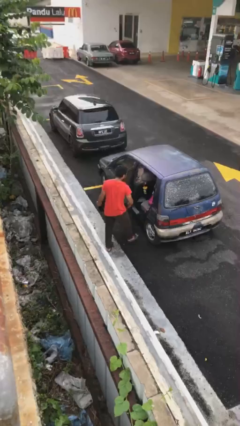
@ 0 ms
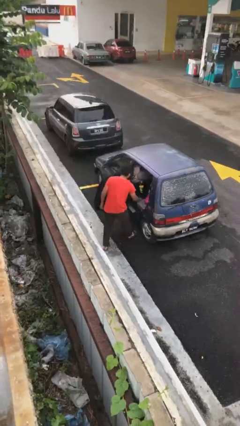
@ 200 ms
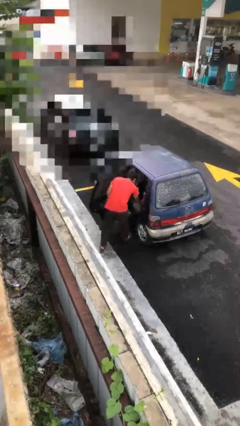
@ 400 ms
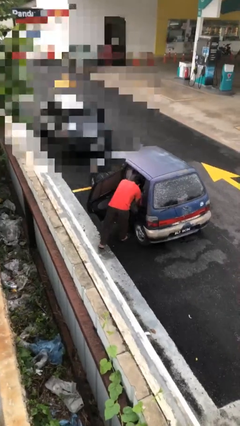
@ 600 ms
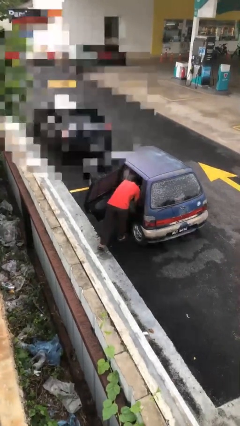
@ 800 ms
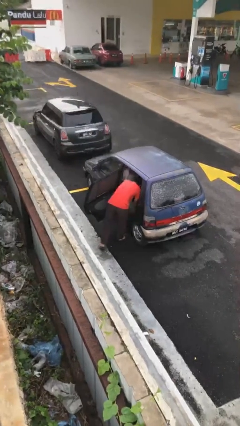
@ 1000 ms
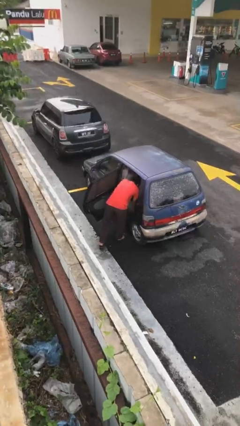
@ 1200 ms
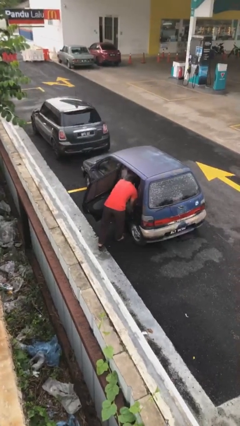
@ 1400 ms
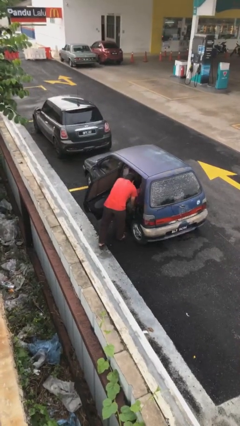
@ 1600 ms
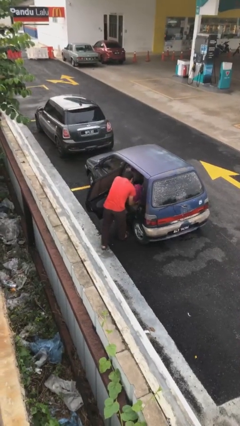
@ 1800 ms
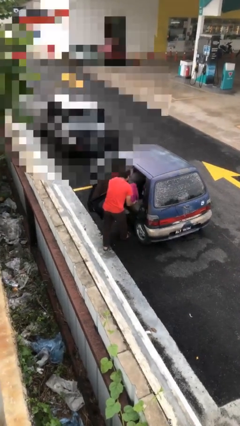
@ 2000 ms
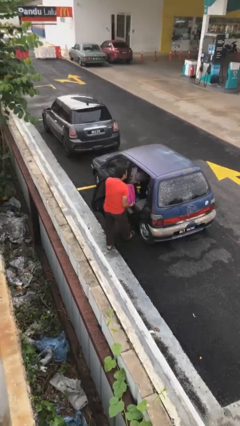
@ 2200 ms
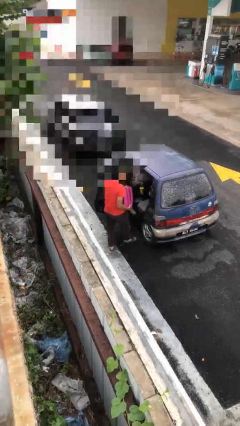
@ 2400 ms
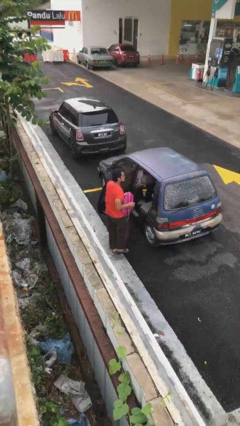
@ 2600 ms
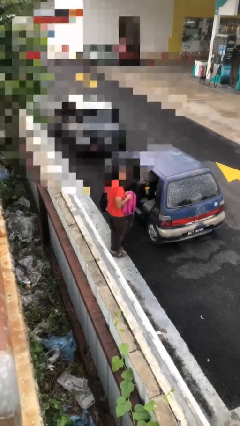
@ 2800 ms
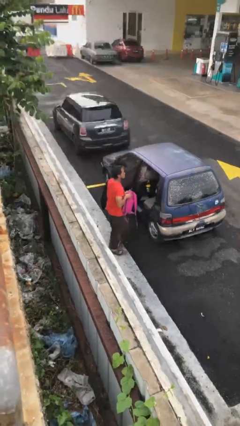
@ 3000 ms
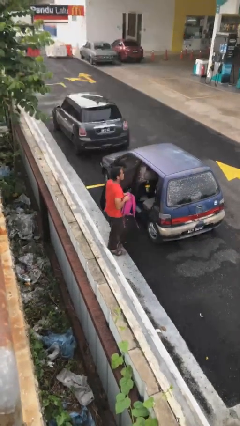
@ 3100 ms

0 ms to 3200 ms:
person unloads car

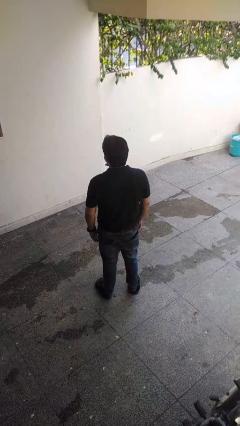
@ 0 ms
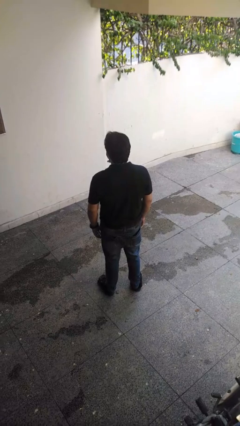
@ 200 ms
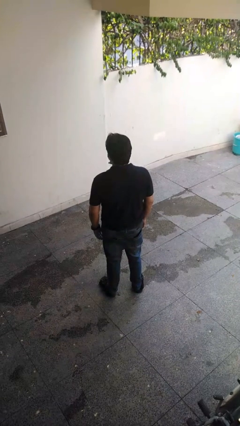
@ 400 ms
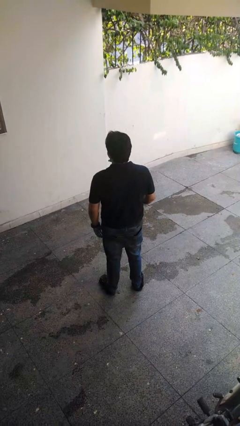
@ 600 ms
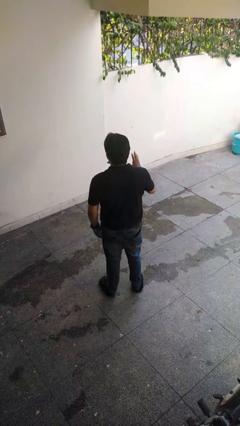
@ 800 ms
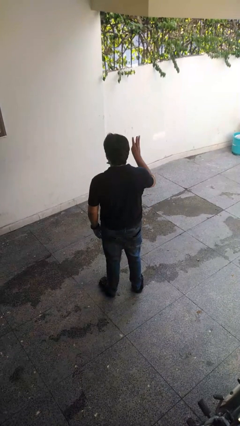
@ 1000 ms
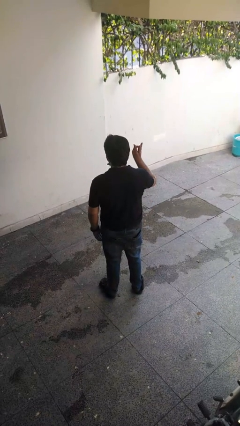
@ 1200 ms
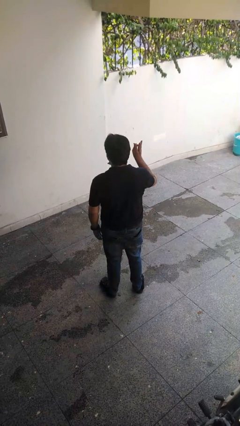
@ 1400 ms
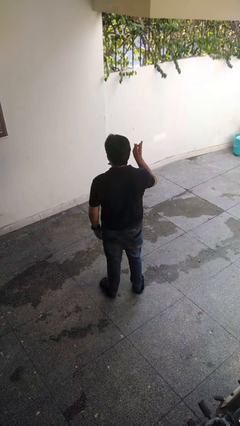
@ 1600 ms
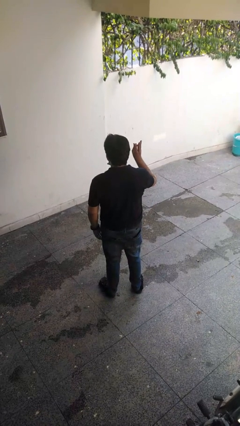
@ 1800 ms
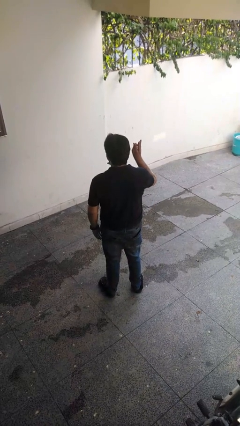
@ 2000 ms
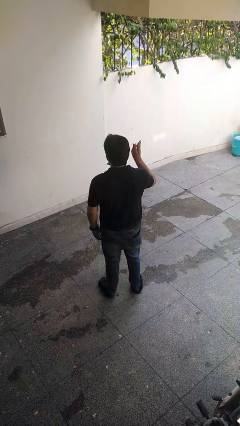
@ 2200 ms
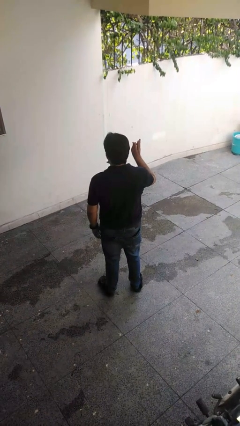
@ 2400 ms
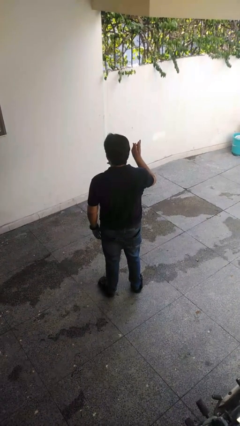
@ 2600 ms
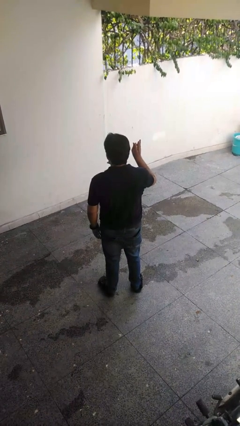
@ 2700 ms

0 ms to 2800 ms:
person gestures number three

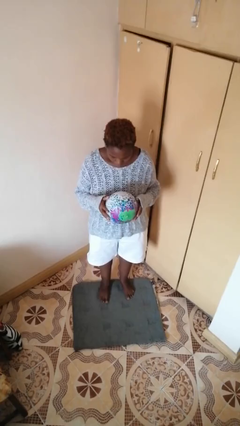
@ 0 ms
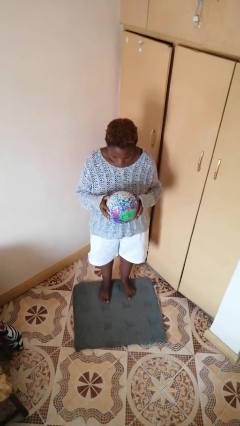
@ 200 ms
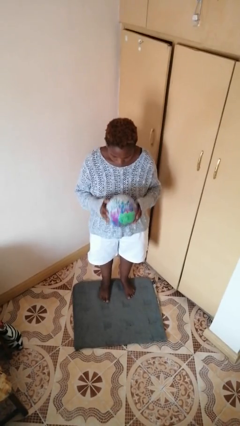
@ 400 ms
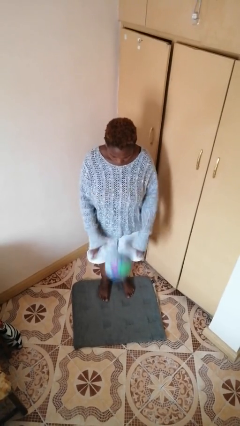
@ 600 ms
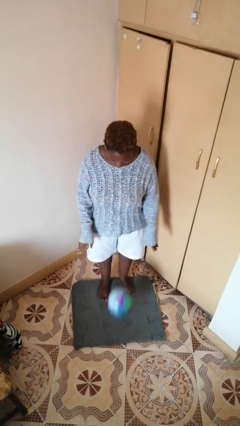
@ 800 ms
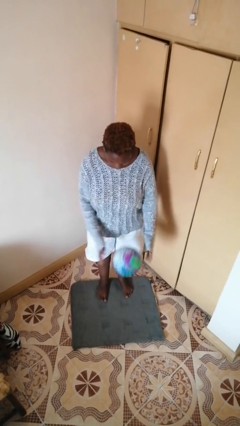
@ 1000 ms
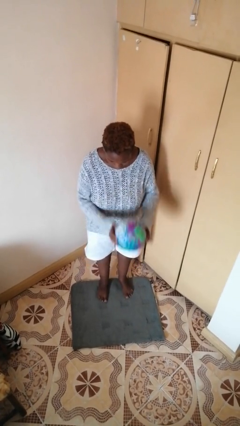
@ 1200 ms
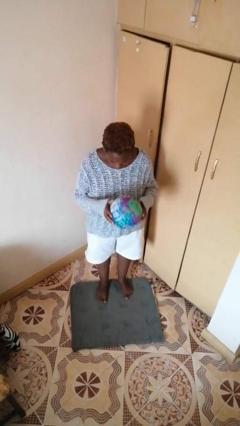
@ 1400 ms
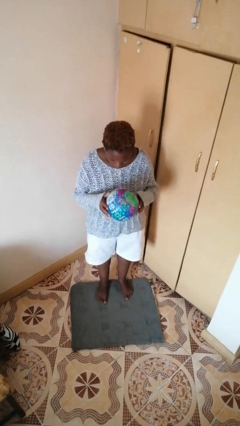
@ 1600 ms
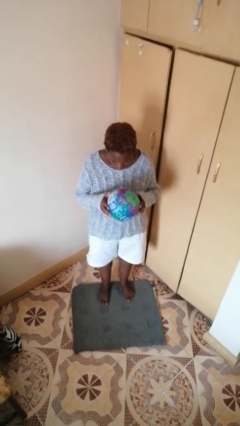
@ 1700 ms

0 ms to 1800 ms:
person bounces ball on floor

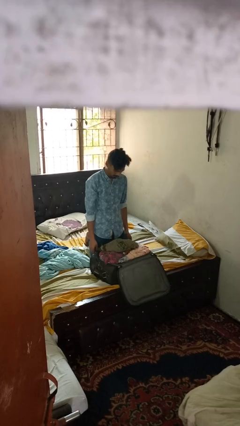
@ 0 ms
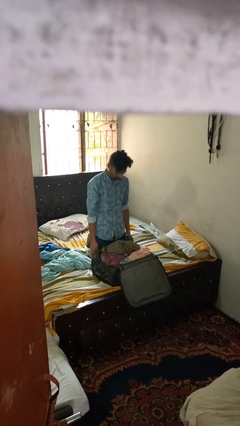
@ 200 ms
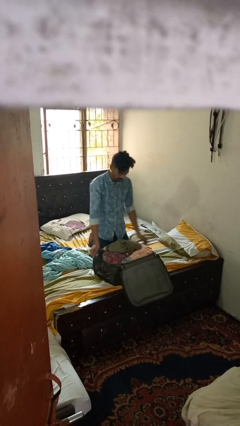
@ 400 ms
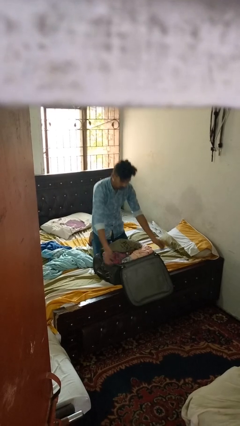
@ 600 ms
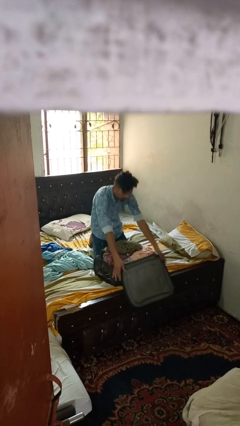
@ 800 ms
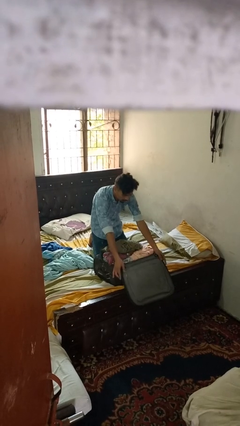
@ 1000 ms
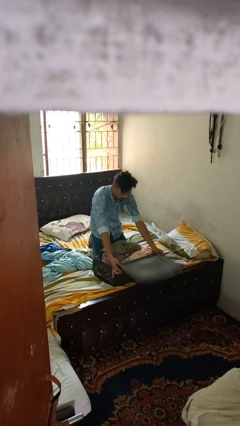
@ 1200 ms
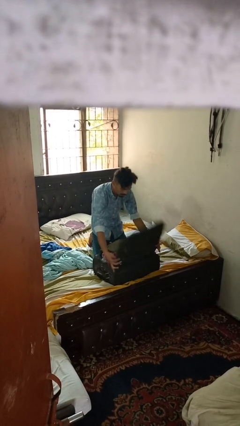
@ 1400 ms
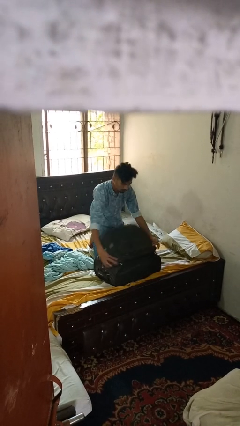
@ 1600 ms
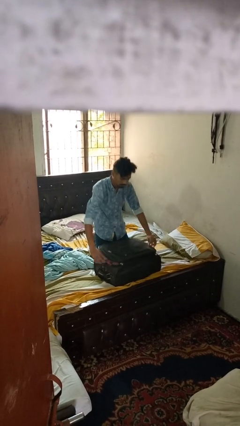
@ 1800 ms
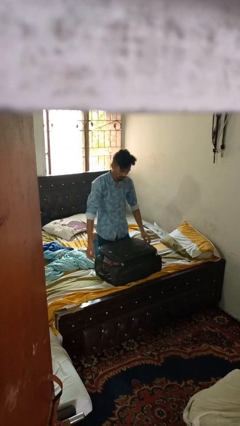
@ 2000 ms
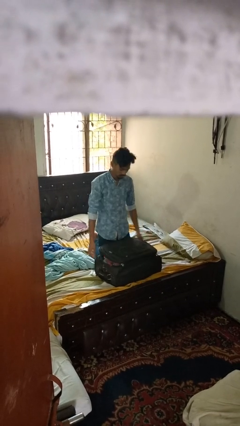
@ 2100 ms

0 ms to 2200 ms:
person closes suitcase

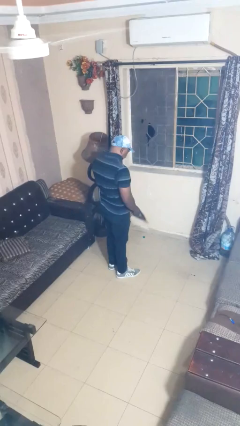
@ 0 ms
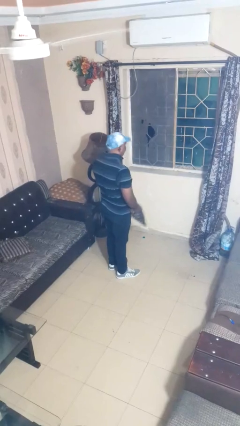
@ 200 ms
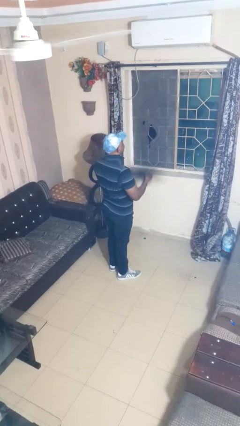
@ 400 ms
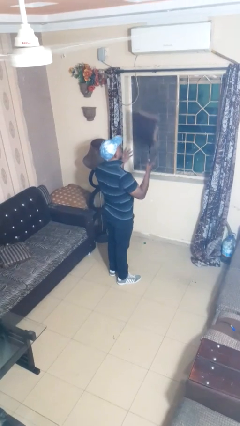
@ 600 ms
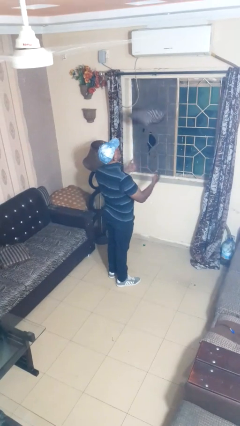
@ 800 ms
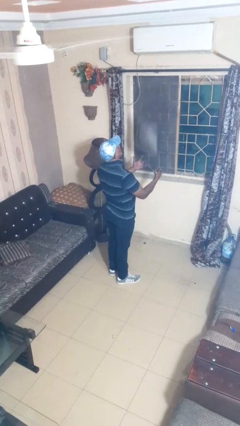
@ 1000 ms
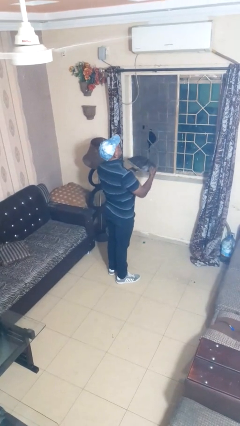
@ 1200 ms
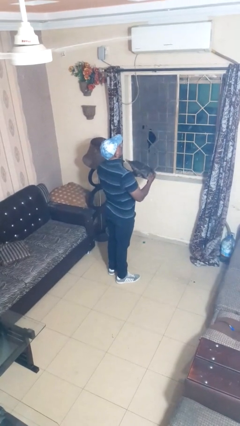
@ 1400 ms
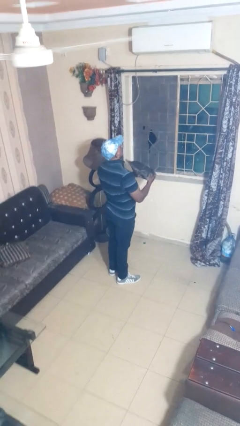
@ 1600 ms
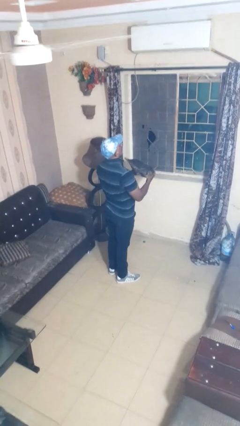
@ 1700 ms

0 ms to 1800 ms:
person drops object

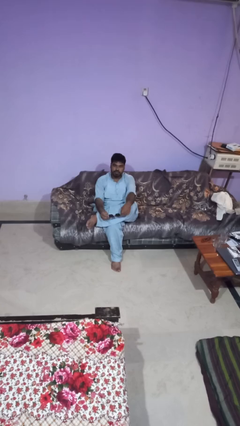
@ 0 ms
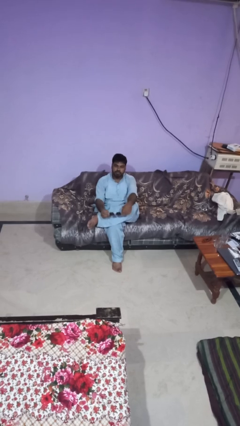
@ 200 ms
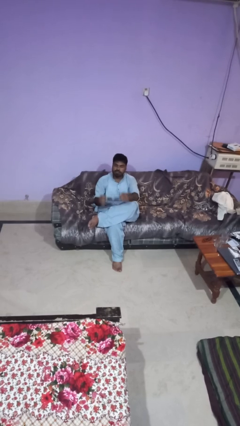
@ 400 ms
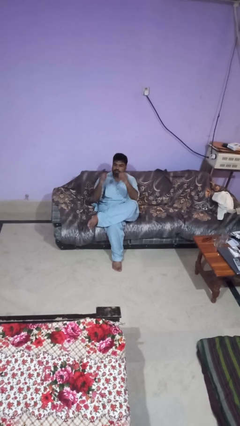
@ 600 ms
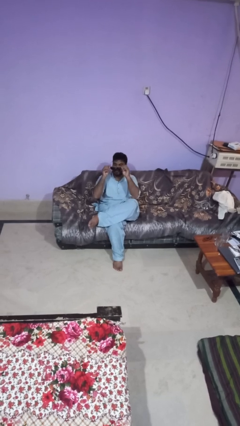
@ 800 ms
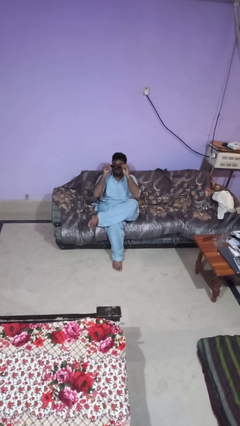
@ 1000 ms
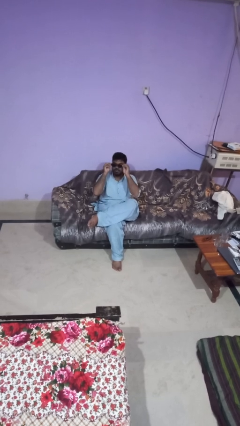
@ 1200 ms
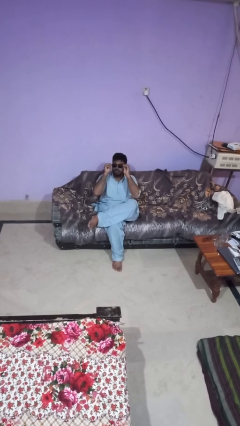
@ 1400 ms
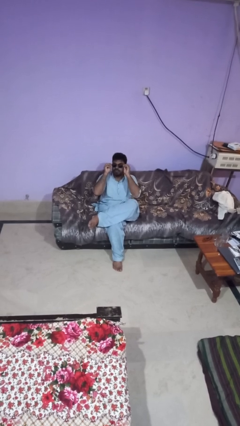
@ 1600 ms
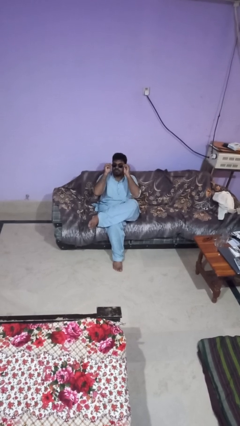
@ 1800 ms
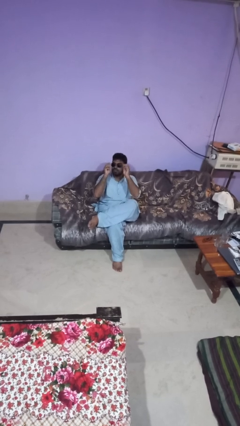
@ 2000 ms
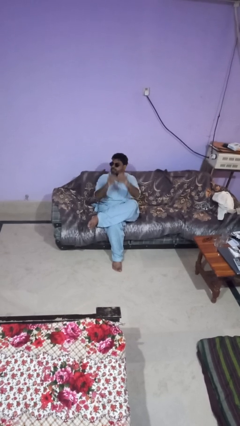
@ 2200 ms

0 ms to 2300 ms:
person puts on sunglasses

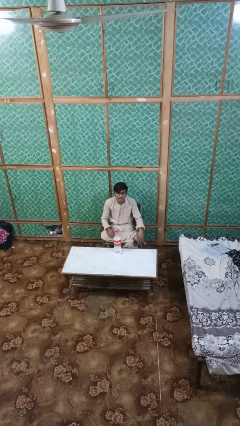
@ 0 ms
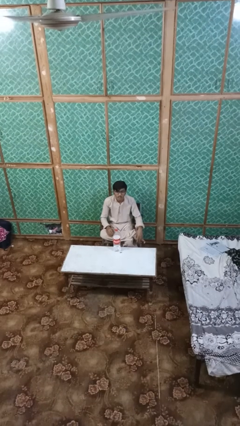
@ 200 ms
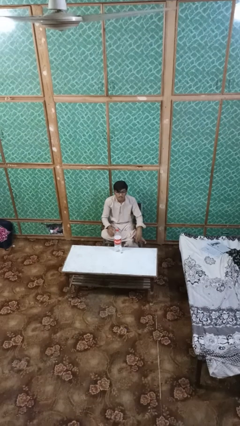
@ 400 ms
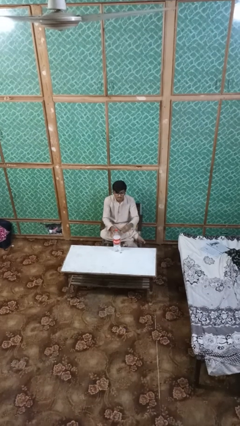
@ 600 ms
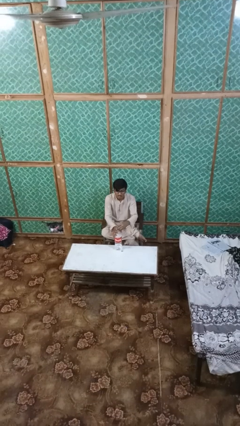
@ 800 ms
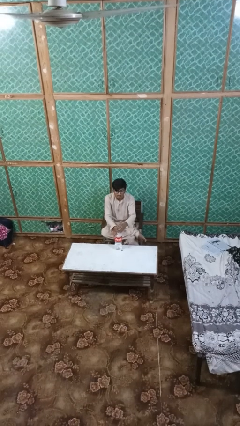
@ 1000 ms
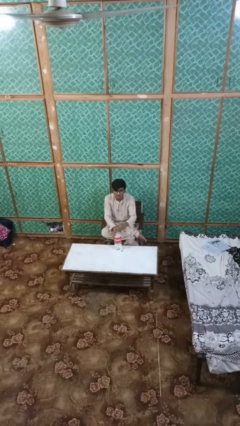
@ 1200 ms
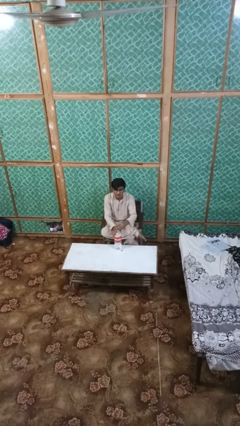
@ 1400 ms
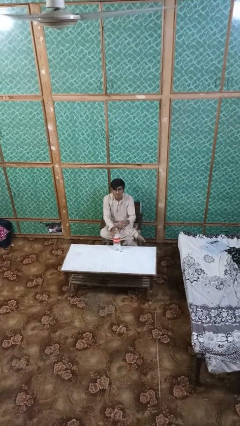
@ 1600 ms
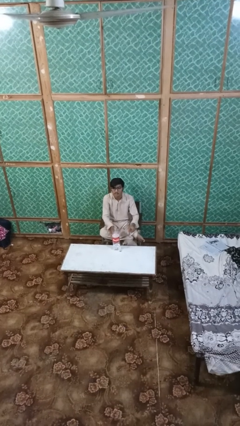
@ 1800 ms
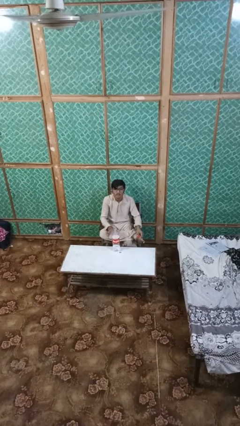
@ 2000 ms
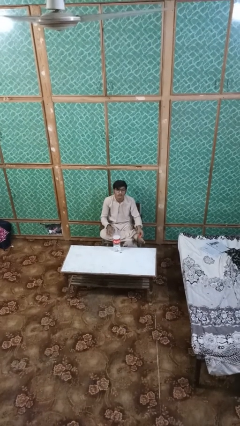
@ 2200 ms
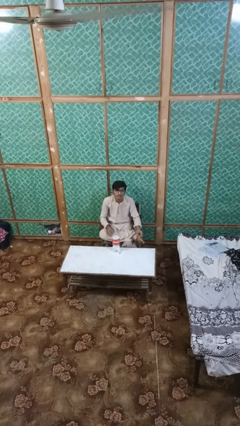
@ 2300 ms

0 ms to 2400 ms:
person unscrews lid from bottle

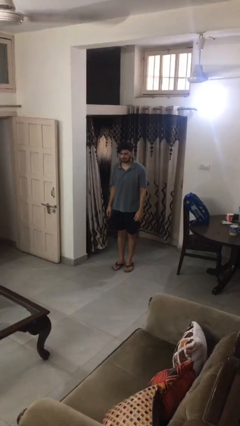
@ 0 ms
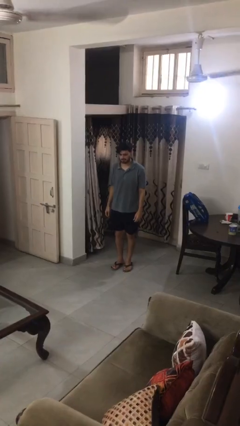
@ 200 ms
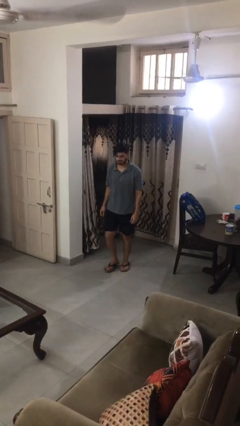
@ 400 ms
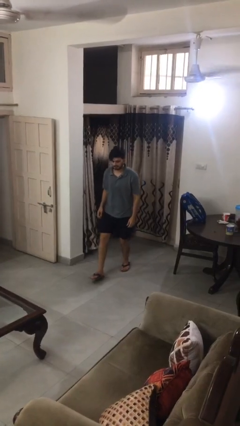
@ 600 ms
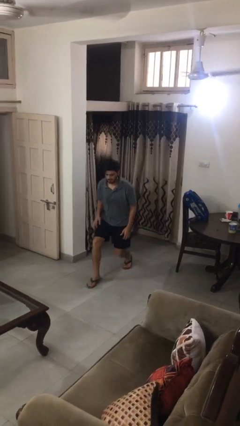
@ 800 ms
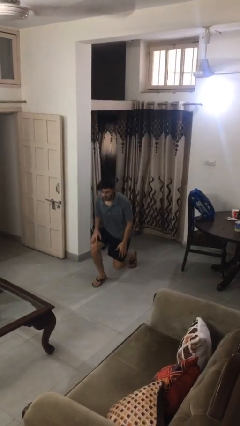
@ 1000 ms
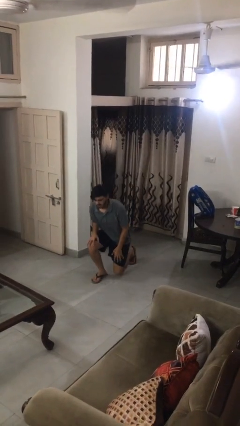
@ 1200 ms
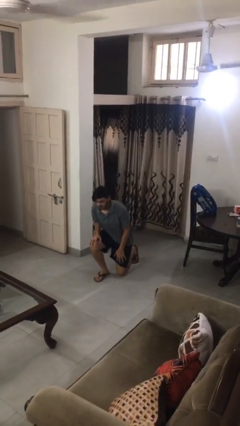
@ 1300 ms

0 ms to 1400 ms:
person kneels
